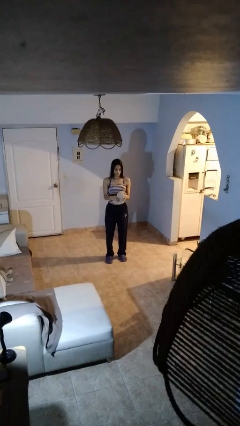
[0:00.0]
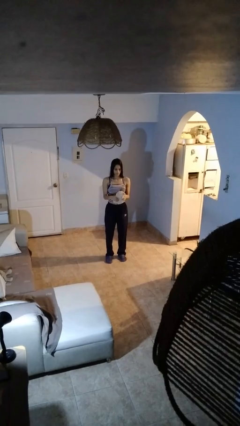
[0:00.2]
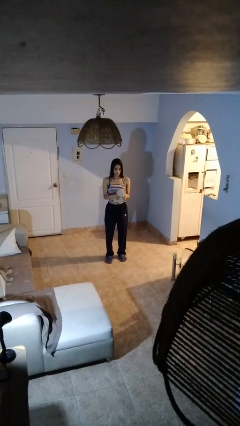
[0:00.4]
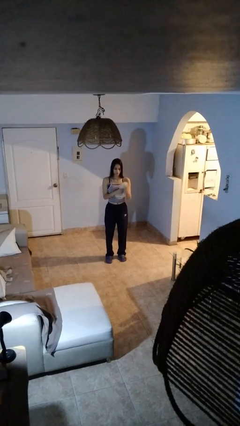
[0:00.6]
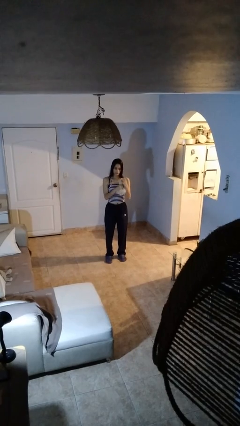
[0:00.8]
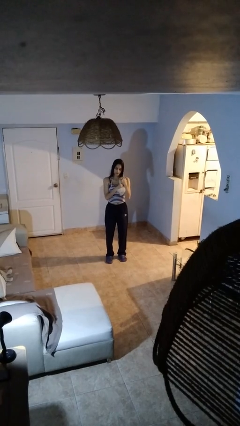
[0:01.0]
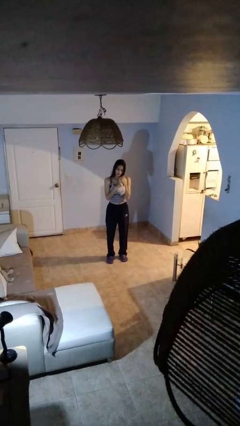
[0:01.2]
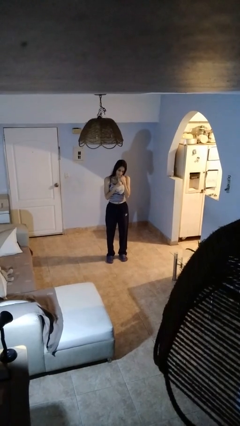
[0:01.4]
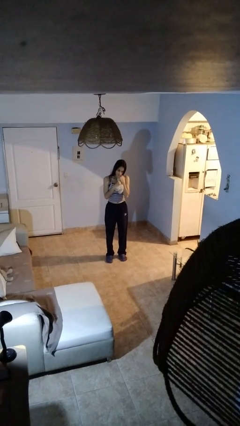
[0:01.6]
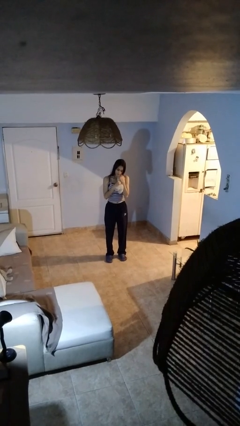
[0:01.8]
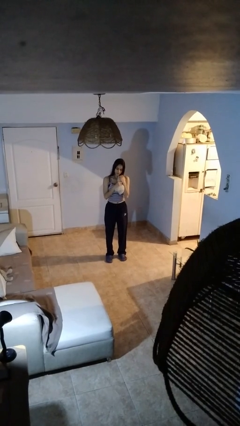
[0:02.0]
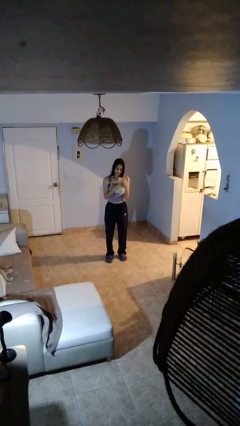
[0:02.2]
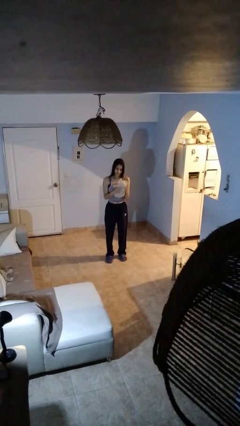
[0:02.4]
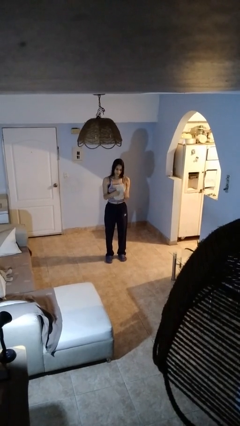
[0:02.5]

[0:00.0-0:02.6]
person hugs stuffed animal

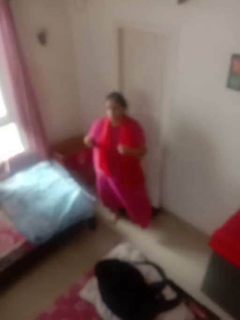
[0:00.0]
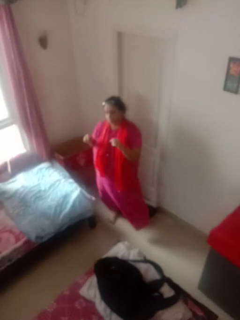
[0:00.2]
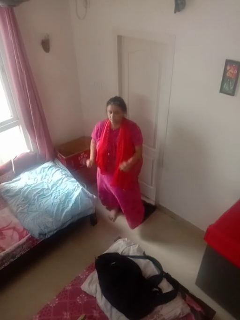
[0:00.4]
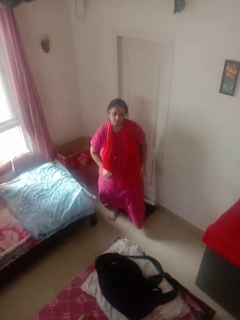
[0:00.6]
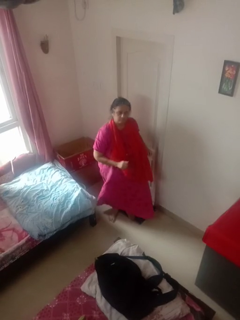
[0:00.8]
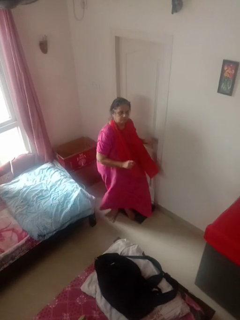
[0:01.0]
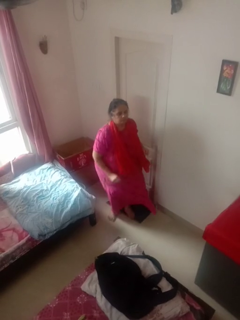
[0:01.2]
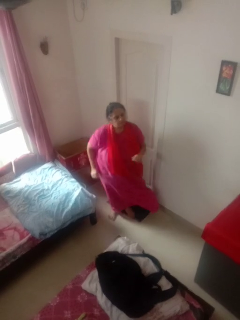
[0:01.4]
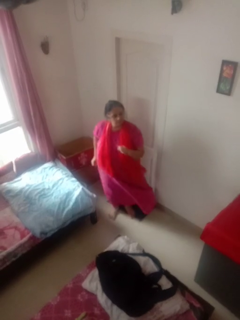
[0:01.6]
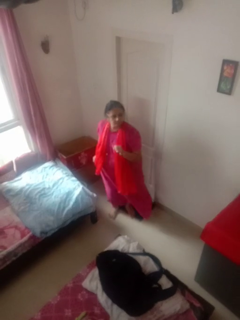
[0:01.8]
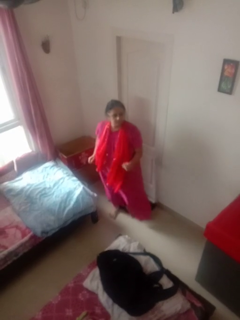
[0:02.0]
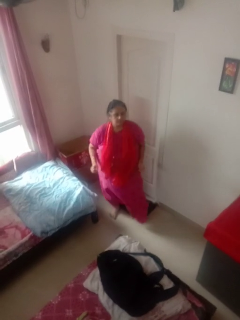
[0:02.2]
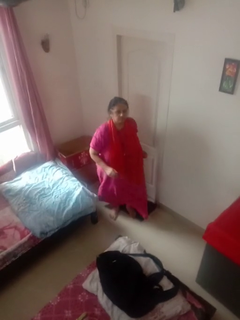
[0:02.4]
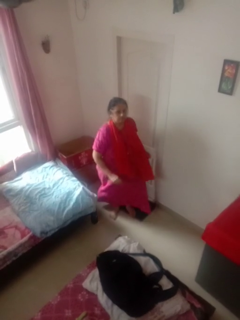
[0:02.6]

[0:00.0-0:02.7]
person dances in place

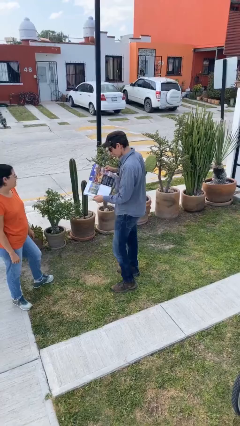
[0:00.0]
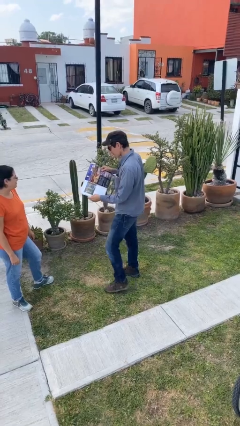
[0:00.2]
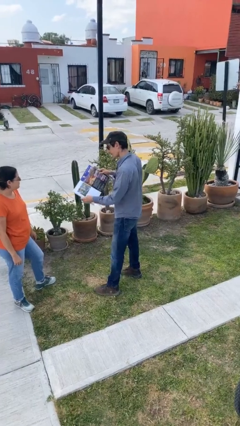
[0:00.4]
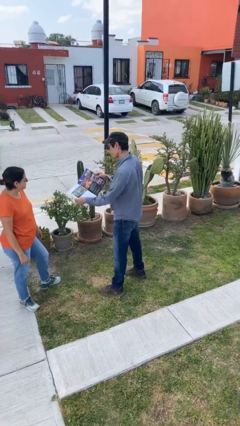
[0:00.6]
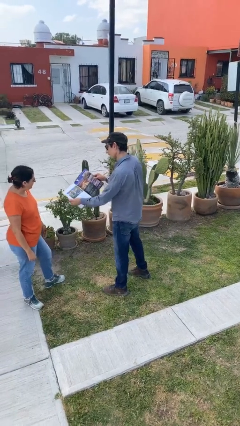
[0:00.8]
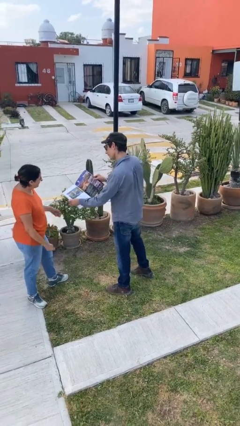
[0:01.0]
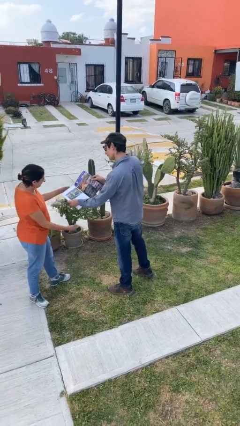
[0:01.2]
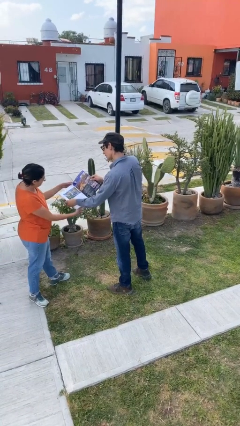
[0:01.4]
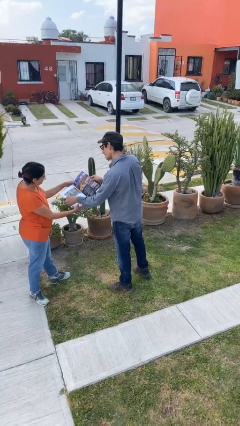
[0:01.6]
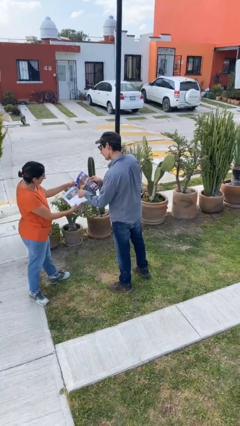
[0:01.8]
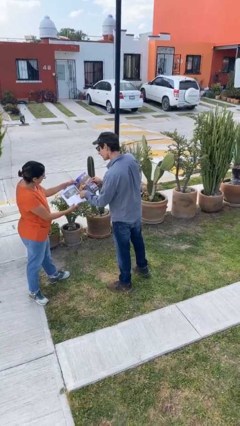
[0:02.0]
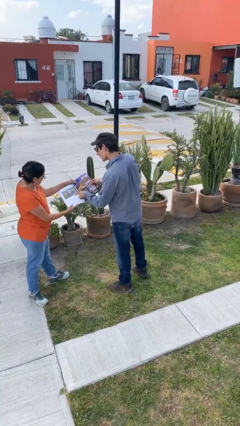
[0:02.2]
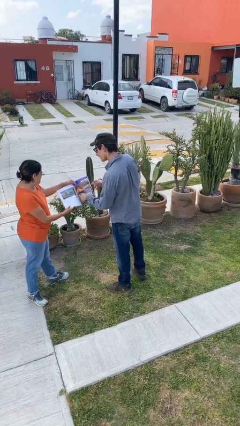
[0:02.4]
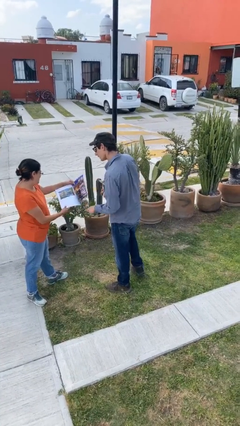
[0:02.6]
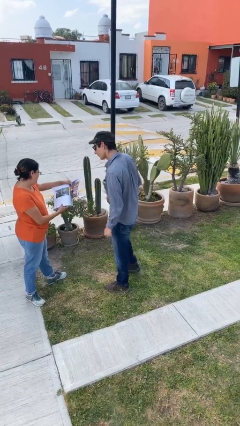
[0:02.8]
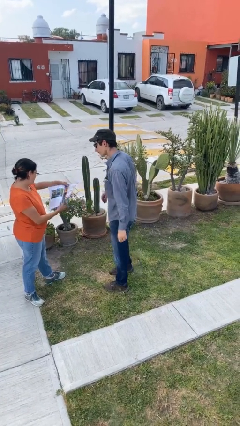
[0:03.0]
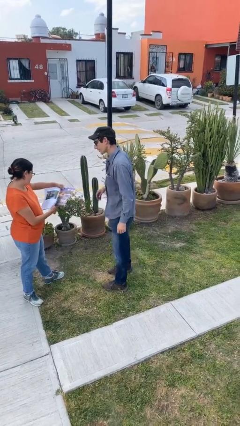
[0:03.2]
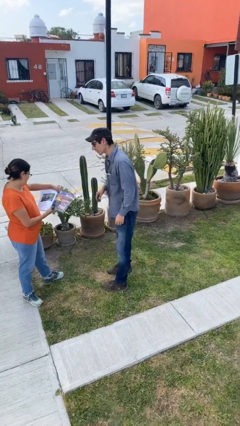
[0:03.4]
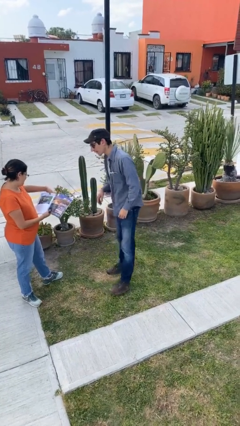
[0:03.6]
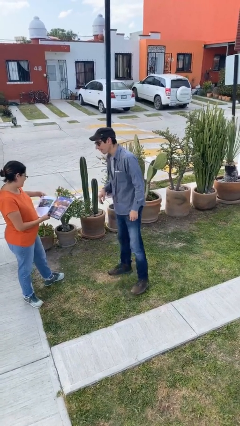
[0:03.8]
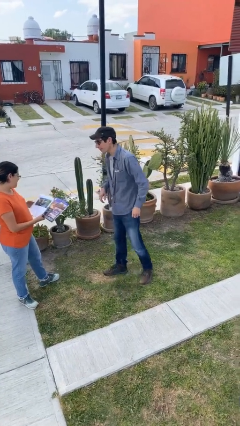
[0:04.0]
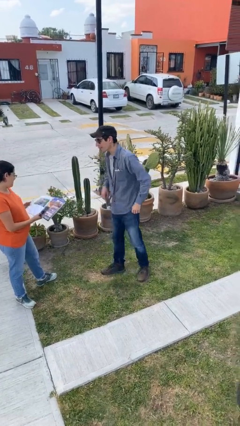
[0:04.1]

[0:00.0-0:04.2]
person transfers object to person

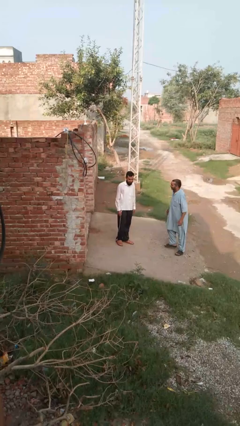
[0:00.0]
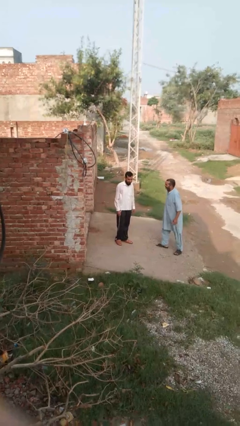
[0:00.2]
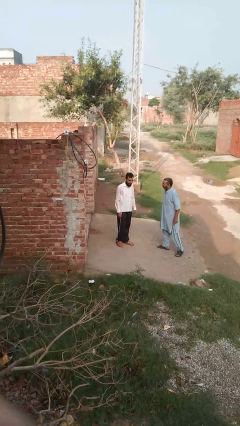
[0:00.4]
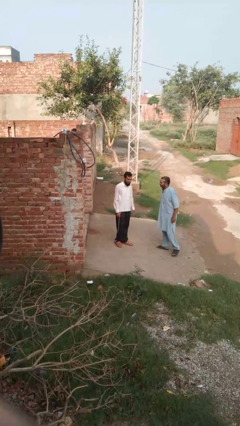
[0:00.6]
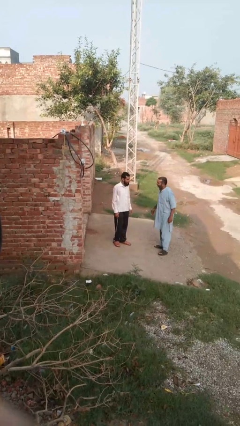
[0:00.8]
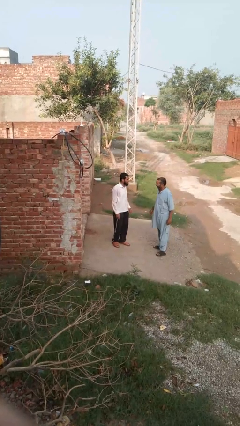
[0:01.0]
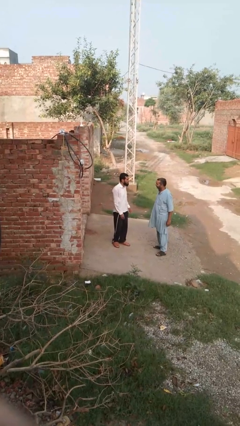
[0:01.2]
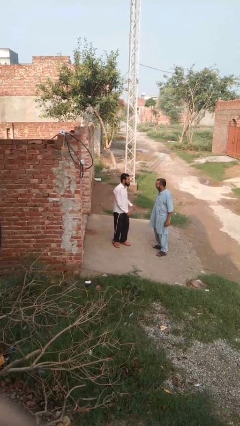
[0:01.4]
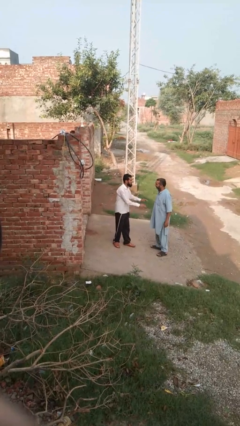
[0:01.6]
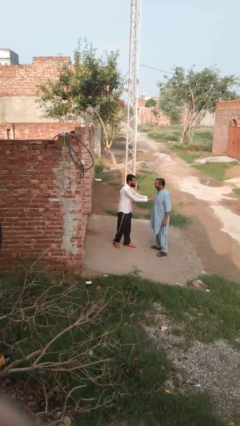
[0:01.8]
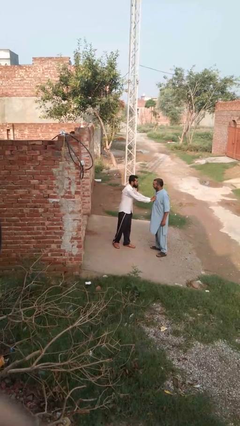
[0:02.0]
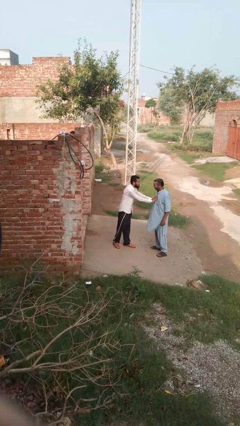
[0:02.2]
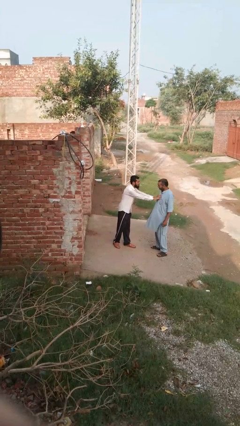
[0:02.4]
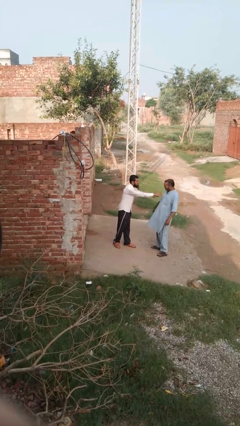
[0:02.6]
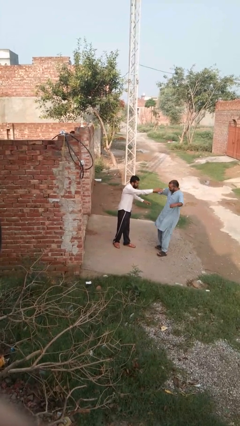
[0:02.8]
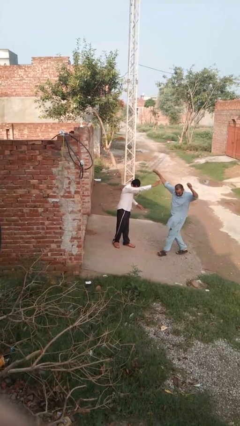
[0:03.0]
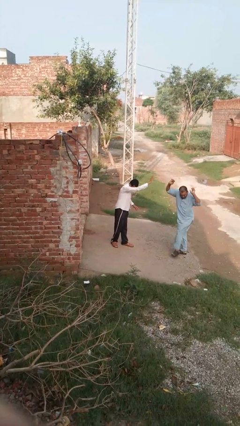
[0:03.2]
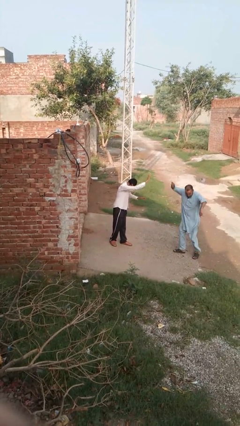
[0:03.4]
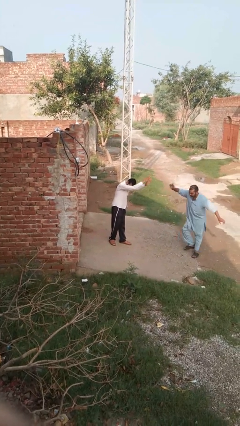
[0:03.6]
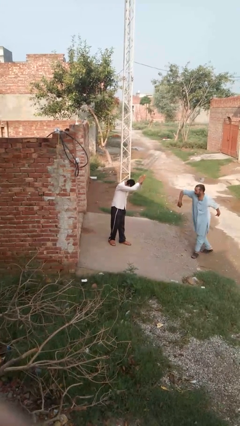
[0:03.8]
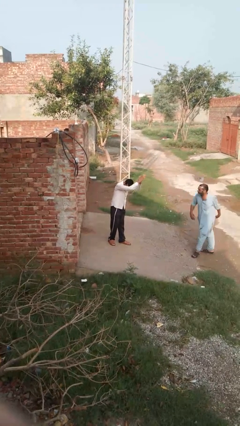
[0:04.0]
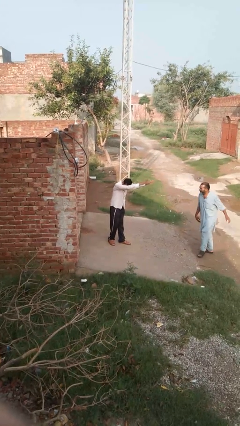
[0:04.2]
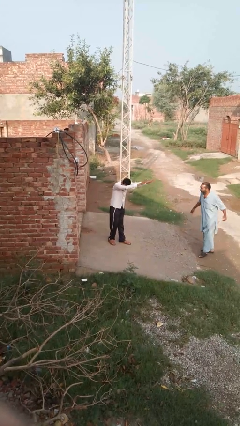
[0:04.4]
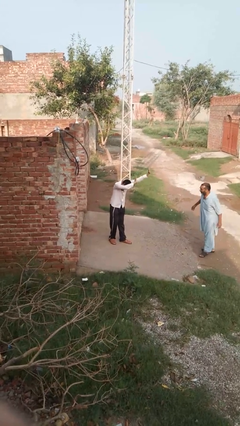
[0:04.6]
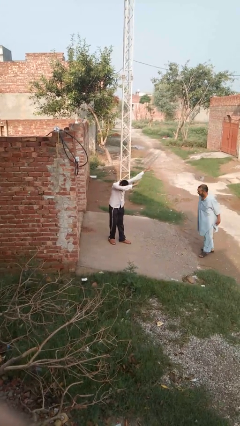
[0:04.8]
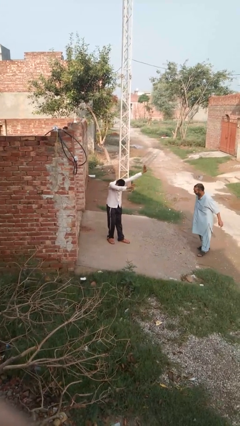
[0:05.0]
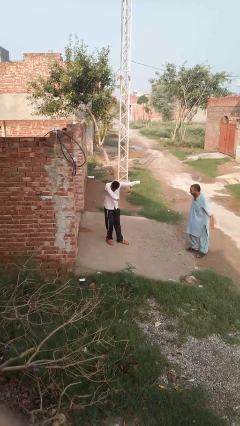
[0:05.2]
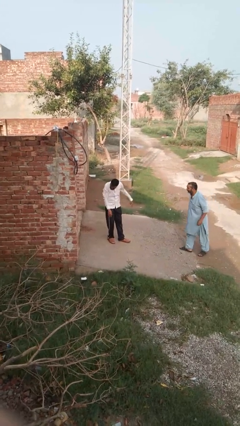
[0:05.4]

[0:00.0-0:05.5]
person shoves person

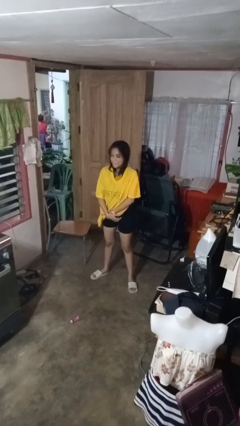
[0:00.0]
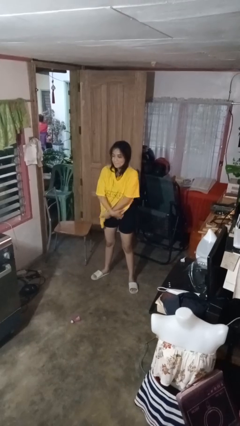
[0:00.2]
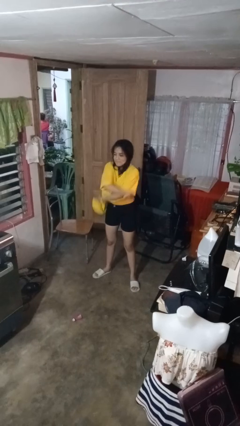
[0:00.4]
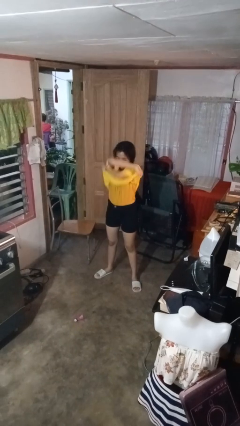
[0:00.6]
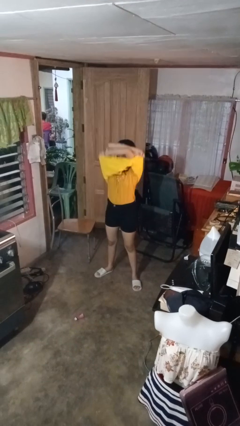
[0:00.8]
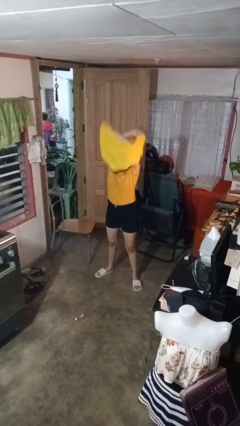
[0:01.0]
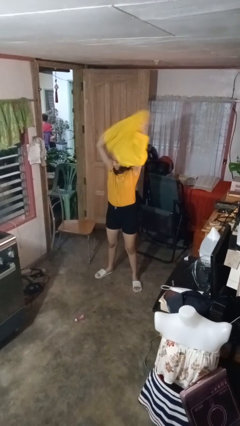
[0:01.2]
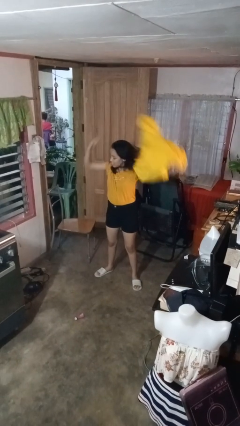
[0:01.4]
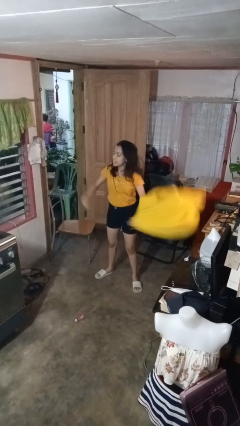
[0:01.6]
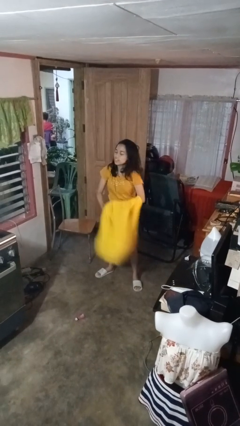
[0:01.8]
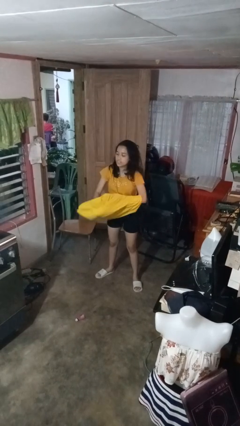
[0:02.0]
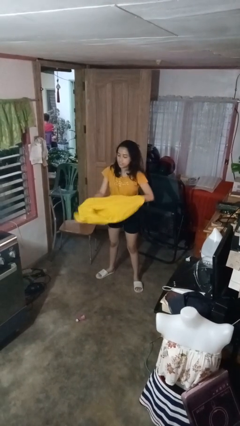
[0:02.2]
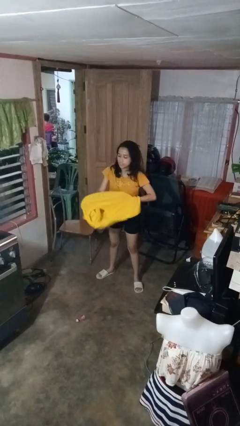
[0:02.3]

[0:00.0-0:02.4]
person takes off shirt

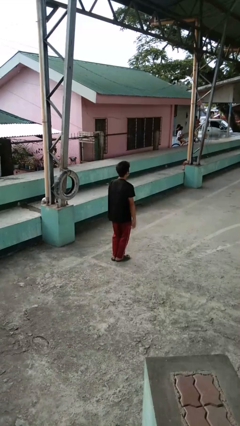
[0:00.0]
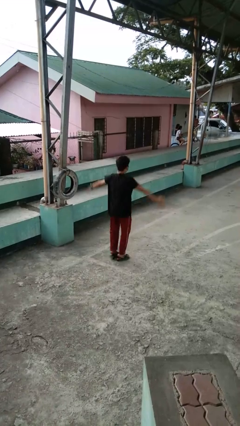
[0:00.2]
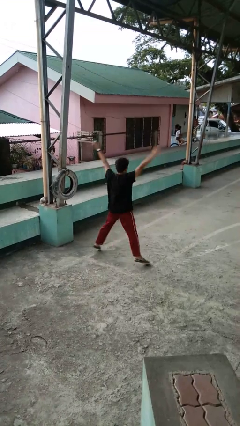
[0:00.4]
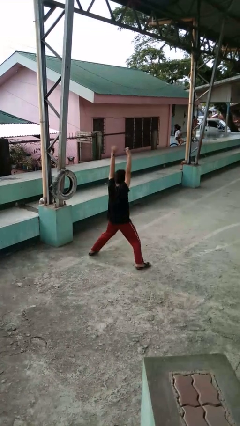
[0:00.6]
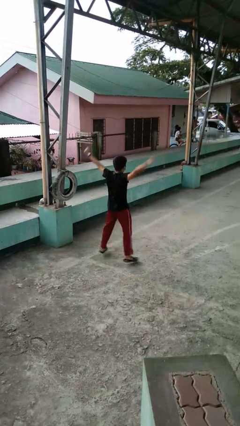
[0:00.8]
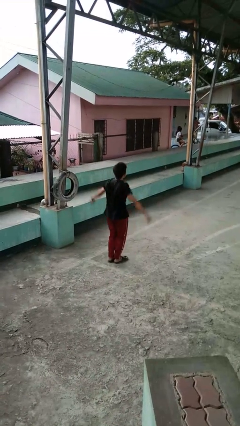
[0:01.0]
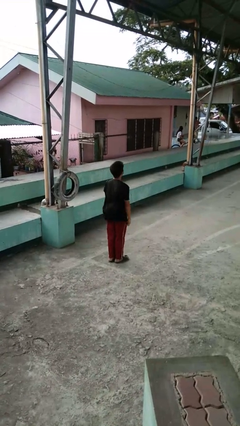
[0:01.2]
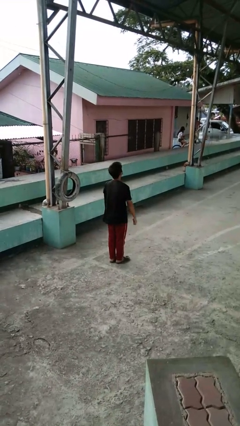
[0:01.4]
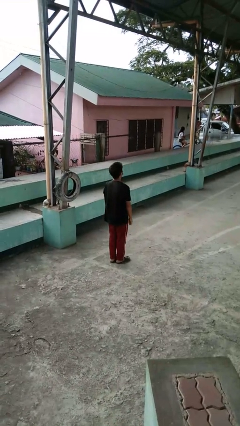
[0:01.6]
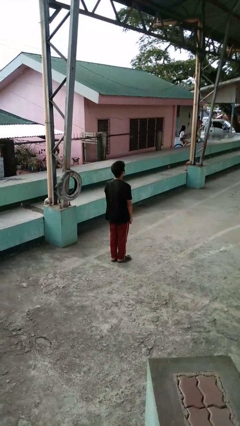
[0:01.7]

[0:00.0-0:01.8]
person exercises with jumping jacks
